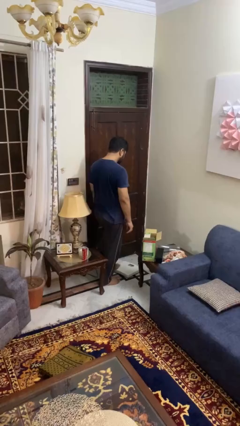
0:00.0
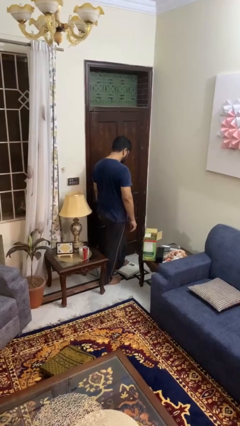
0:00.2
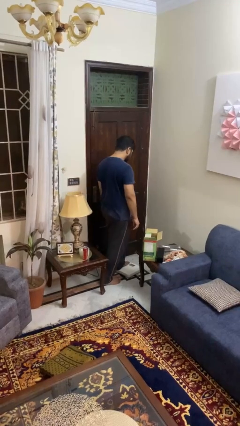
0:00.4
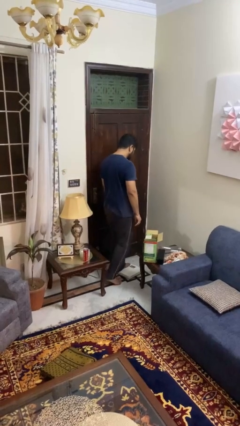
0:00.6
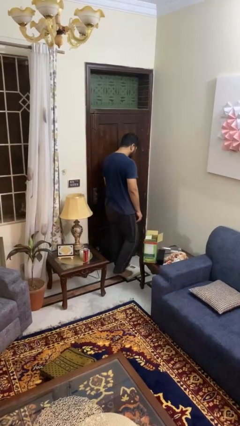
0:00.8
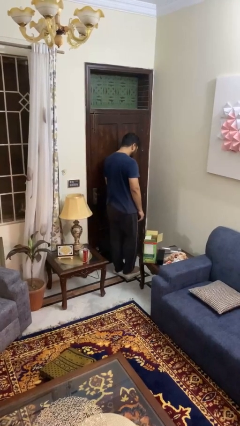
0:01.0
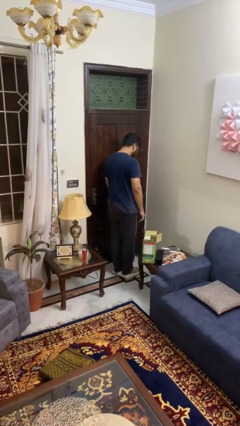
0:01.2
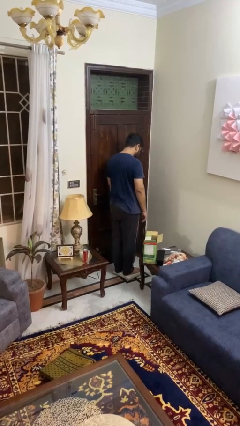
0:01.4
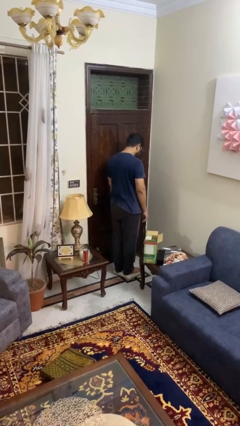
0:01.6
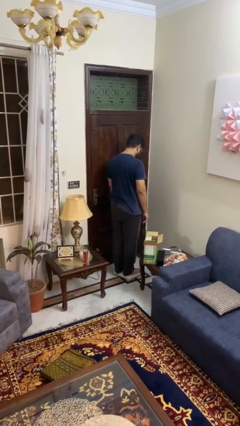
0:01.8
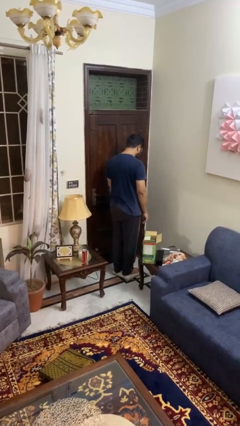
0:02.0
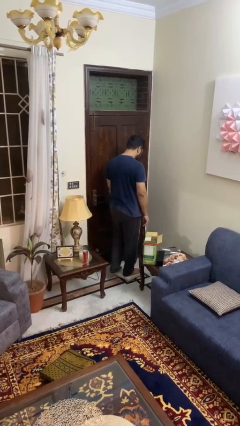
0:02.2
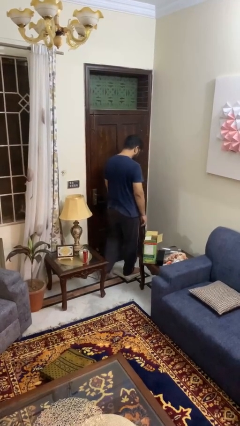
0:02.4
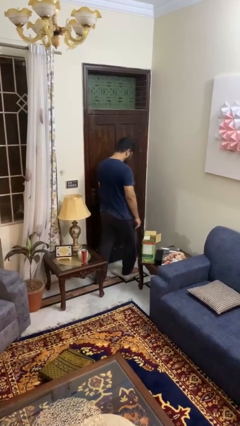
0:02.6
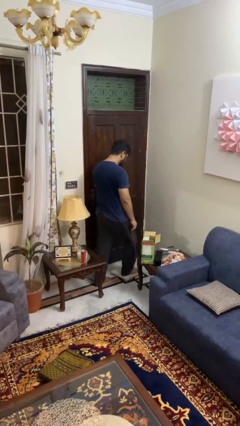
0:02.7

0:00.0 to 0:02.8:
person uses bodyweight scale

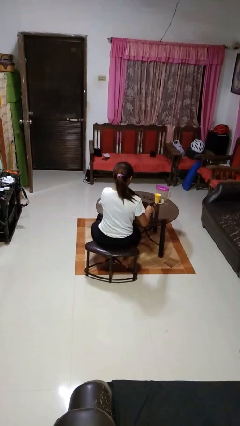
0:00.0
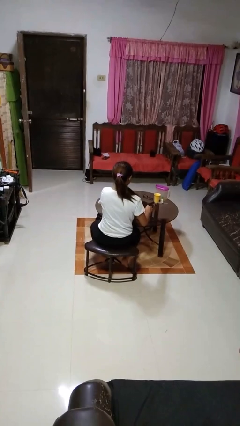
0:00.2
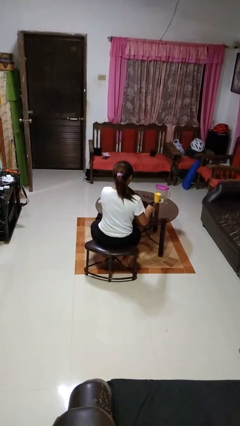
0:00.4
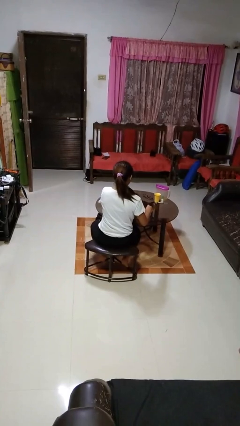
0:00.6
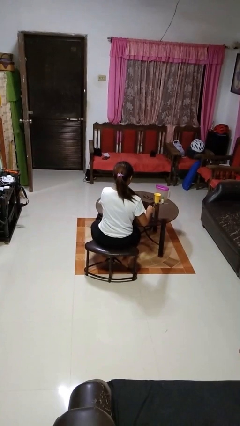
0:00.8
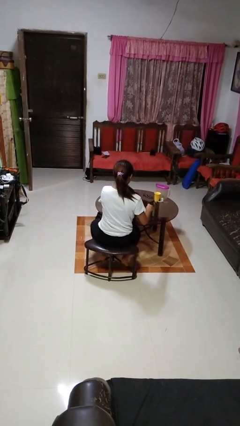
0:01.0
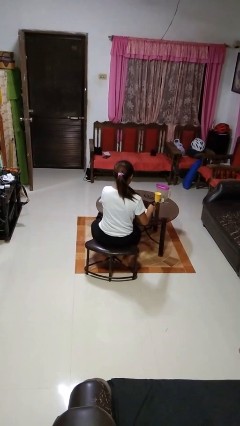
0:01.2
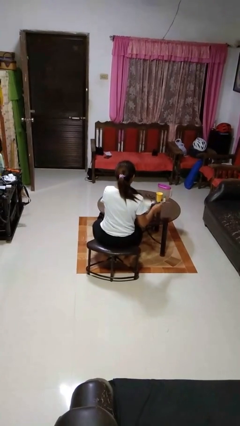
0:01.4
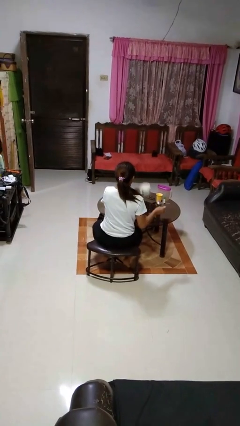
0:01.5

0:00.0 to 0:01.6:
person stirs mug

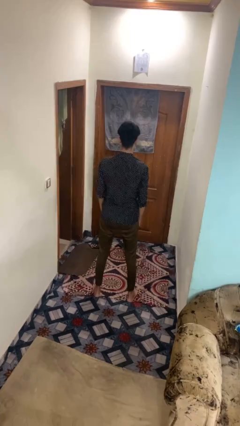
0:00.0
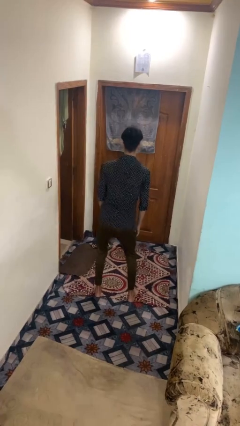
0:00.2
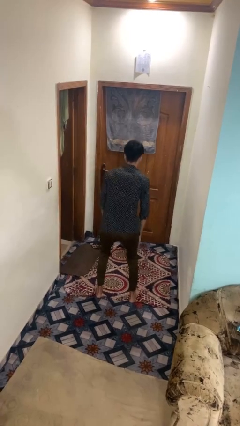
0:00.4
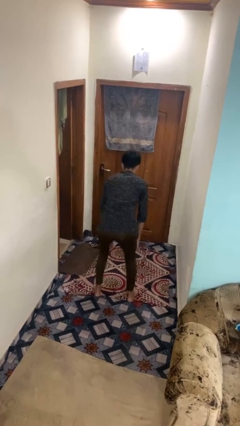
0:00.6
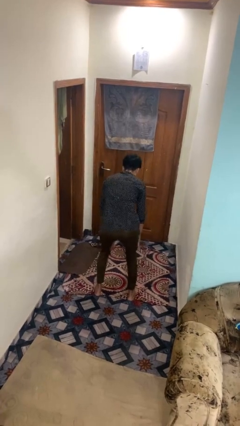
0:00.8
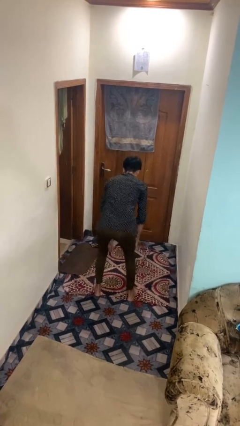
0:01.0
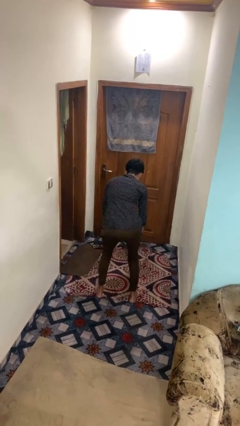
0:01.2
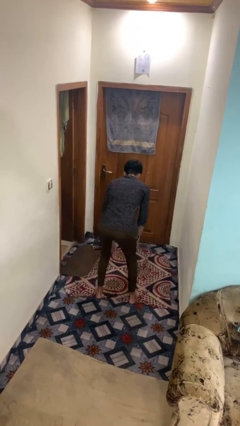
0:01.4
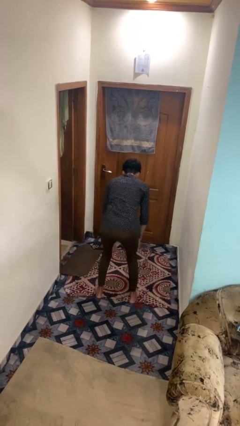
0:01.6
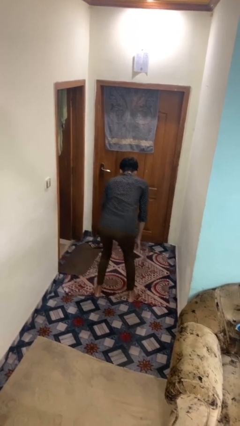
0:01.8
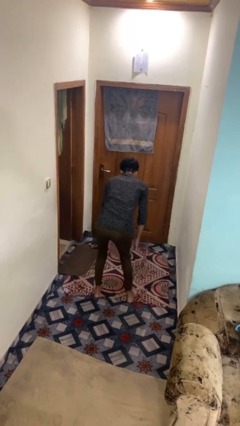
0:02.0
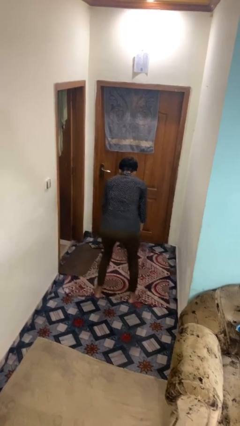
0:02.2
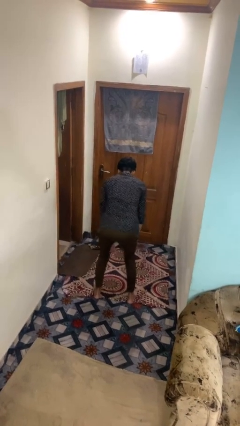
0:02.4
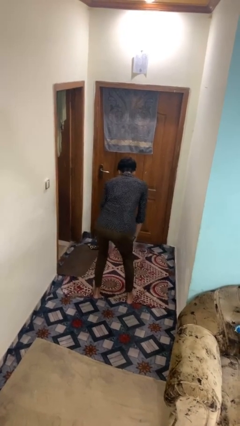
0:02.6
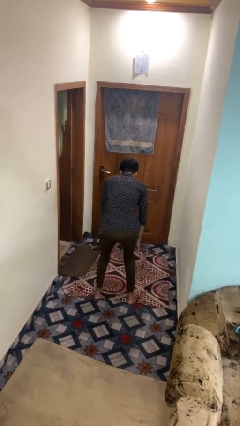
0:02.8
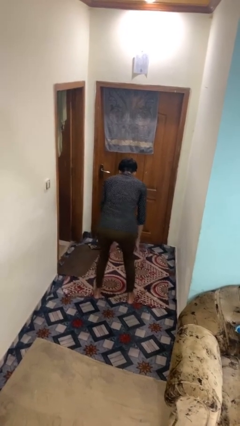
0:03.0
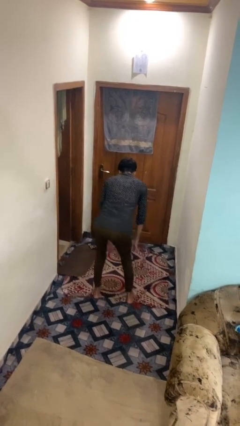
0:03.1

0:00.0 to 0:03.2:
person wiggles hips

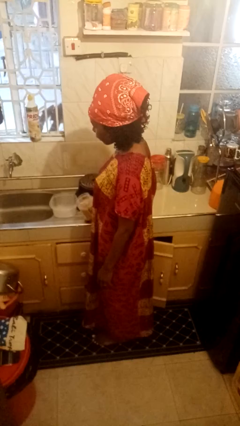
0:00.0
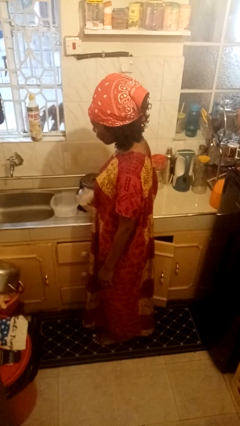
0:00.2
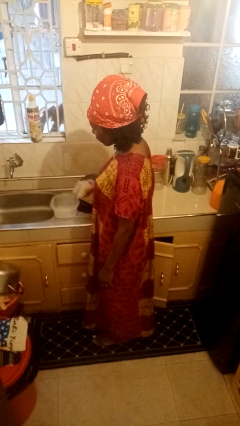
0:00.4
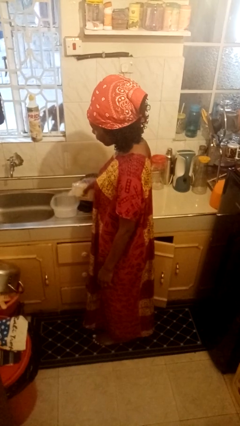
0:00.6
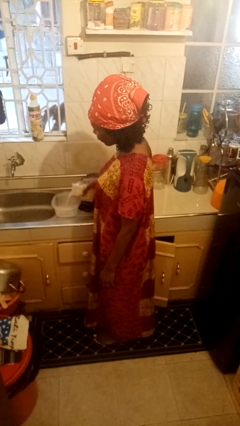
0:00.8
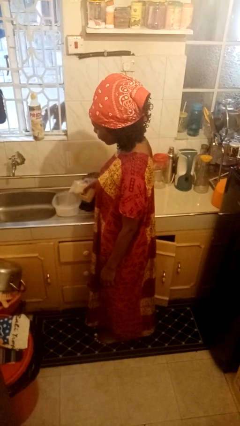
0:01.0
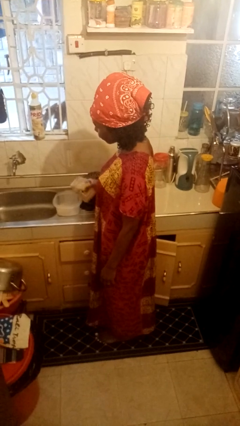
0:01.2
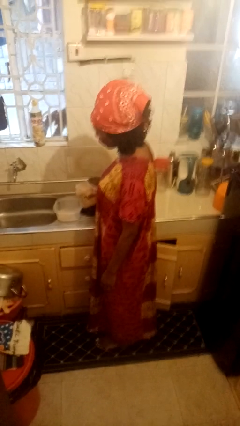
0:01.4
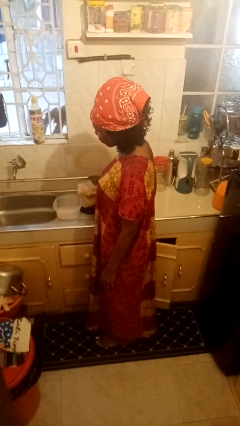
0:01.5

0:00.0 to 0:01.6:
person pours into bowl

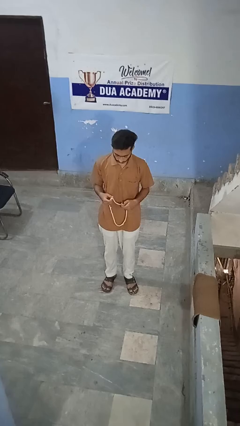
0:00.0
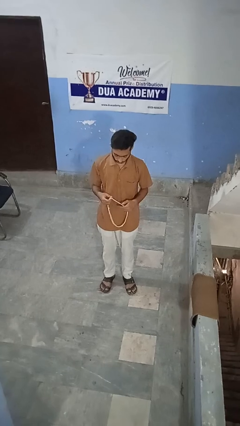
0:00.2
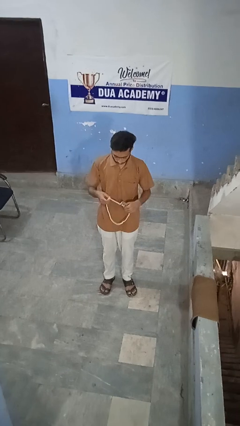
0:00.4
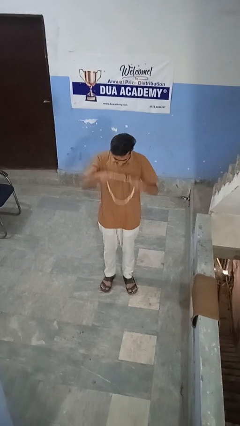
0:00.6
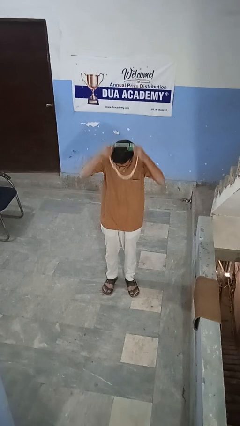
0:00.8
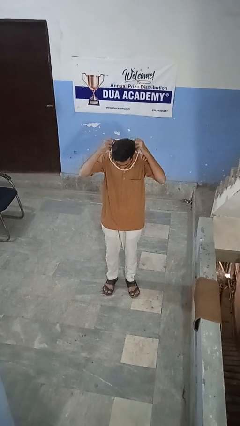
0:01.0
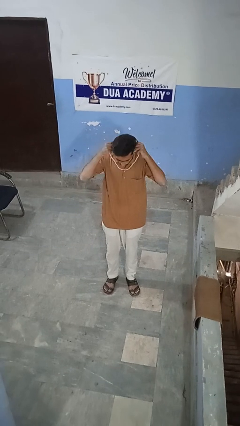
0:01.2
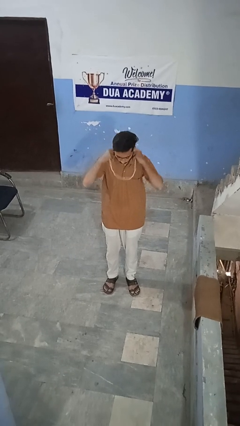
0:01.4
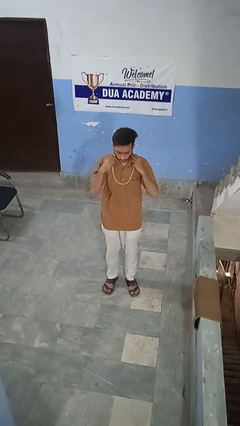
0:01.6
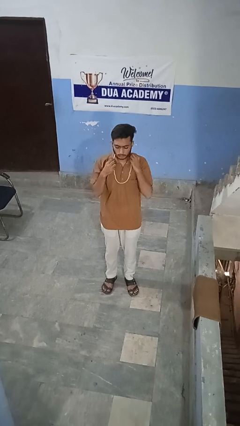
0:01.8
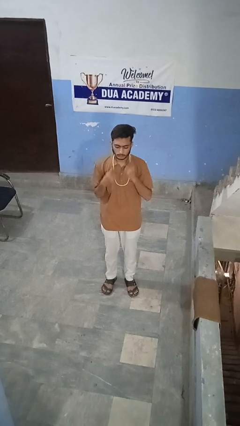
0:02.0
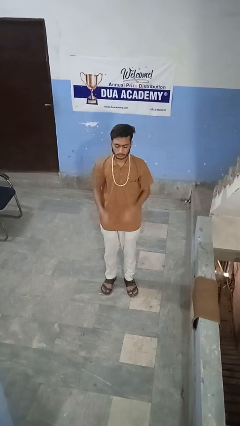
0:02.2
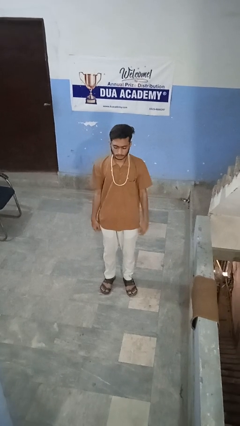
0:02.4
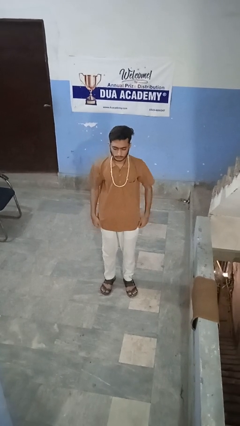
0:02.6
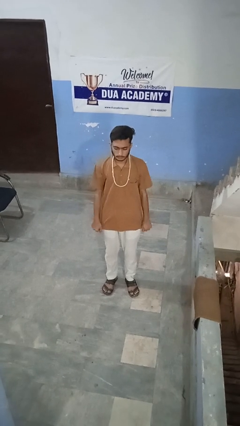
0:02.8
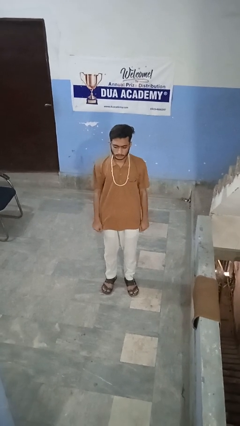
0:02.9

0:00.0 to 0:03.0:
person puts on necklace

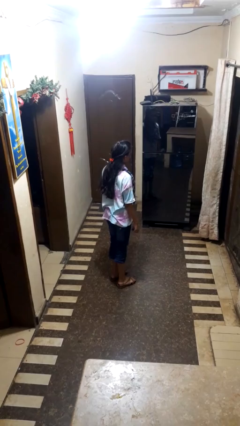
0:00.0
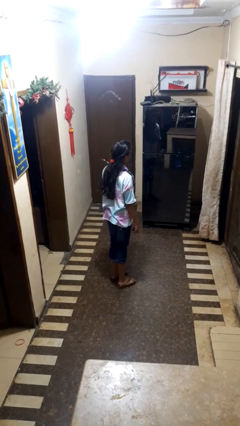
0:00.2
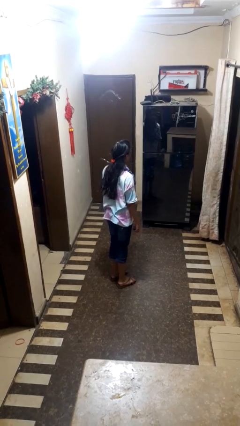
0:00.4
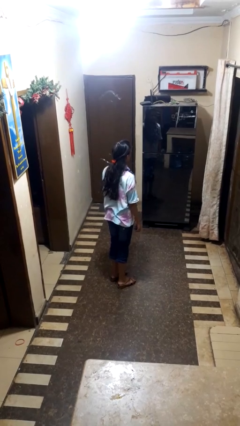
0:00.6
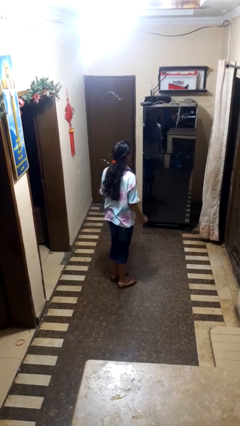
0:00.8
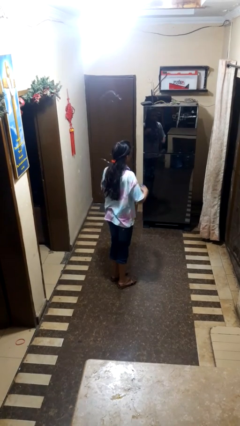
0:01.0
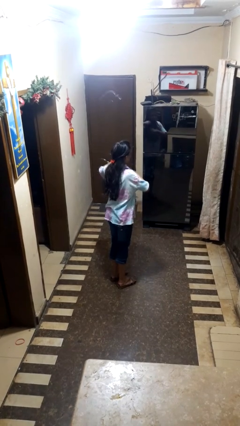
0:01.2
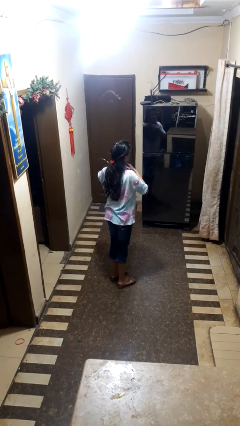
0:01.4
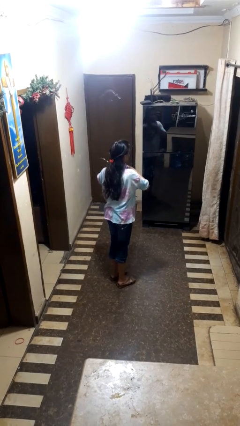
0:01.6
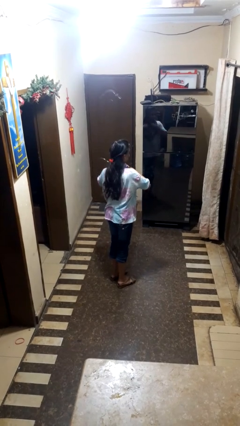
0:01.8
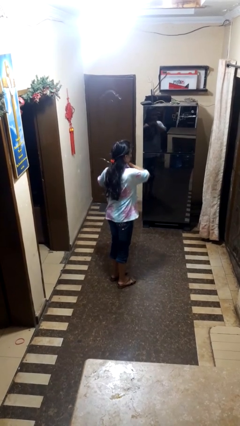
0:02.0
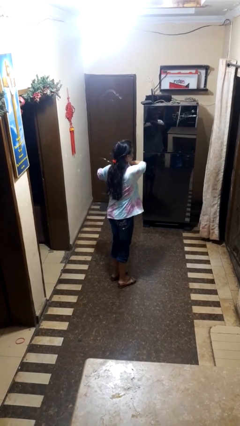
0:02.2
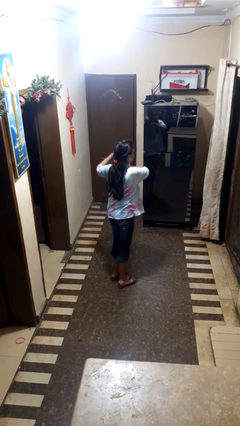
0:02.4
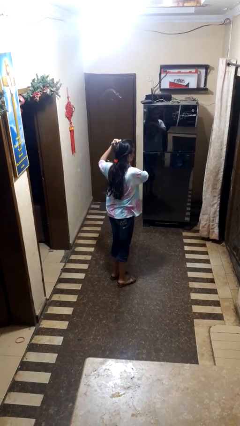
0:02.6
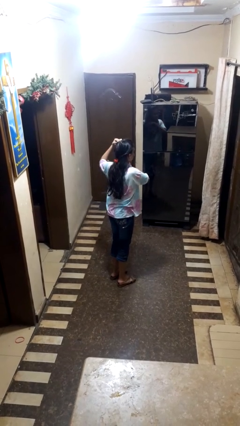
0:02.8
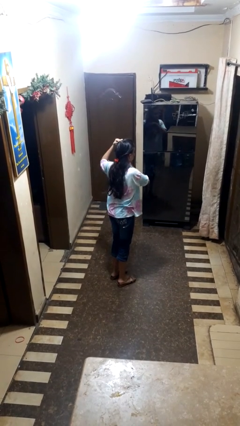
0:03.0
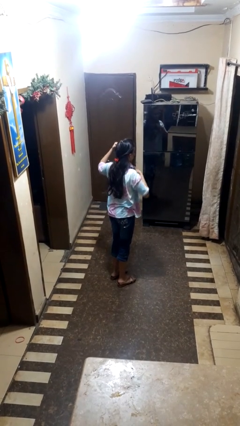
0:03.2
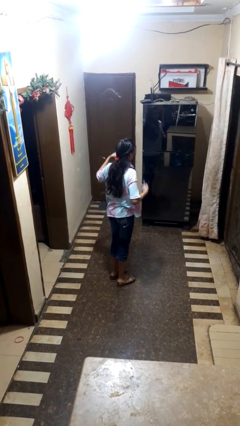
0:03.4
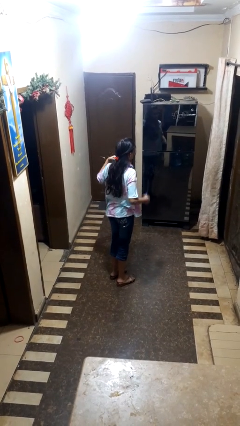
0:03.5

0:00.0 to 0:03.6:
person applies deodorant

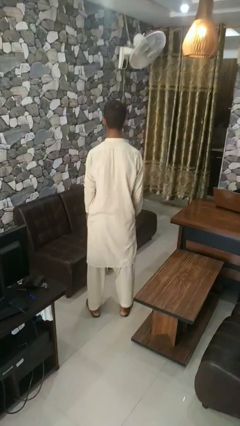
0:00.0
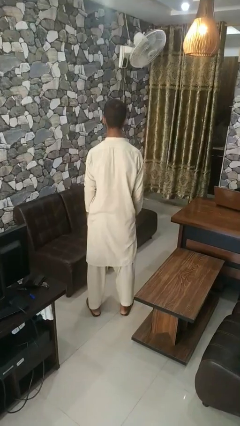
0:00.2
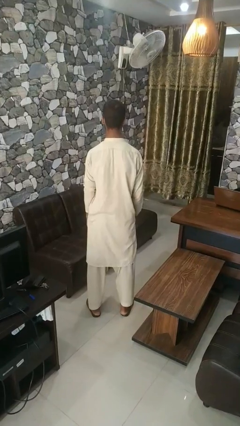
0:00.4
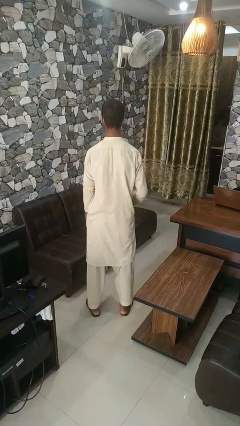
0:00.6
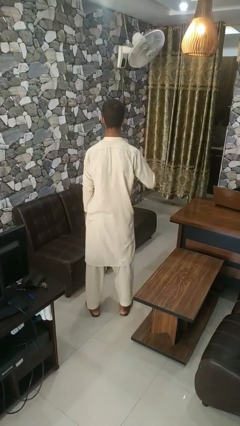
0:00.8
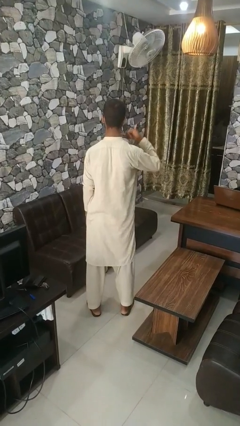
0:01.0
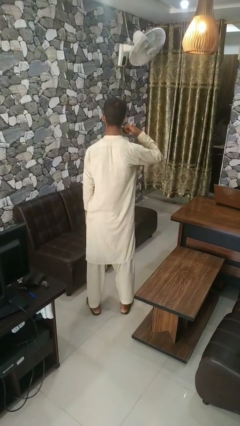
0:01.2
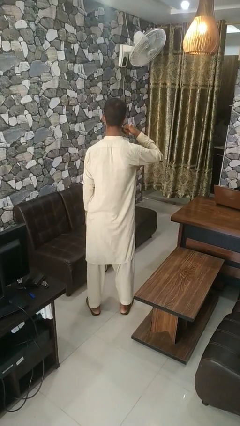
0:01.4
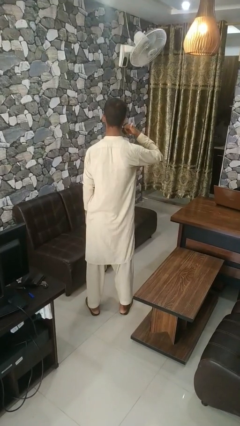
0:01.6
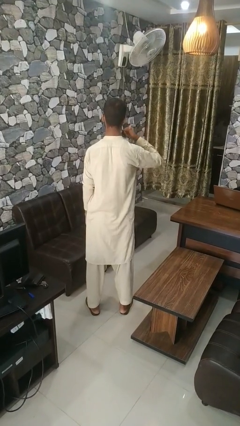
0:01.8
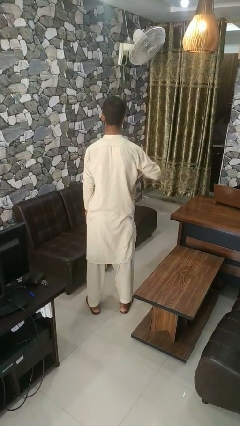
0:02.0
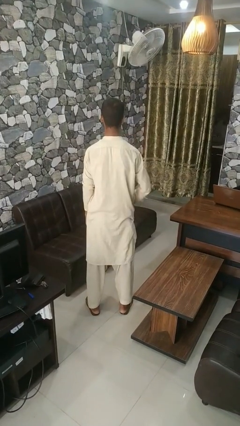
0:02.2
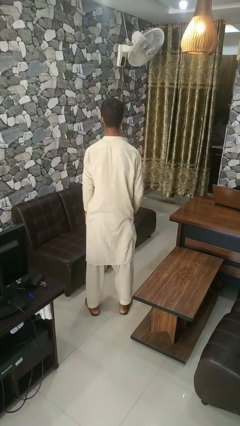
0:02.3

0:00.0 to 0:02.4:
person gestures call me
